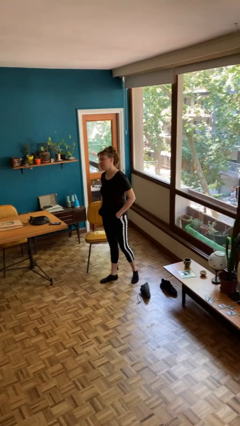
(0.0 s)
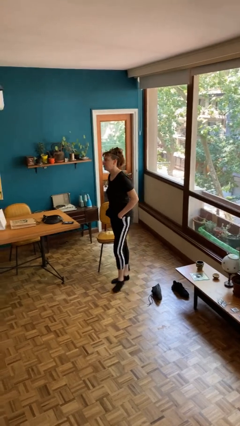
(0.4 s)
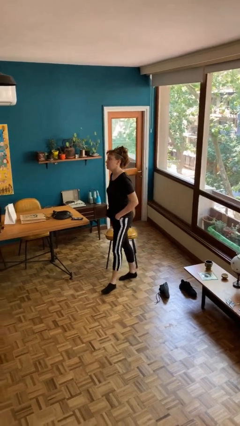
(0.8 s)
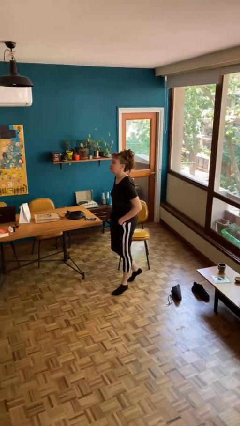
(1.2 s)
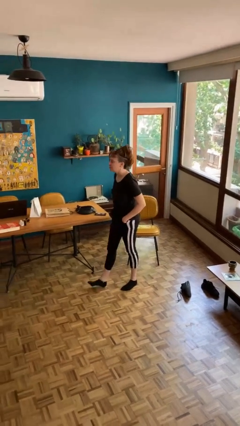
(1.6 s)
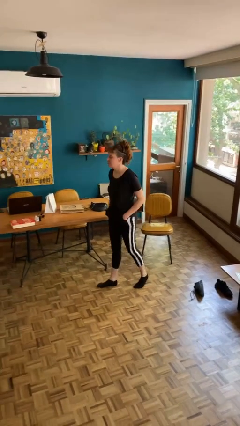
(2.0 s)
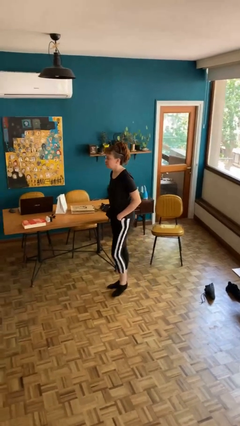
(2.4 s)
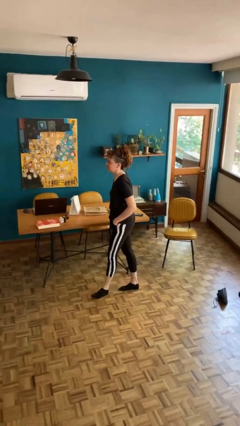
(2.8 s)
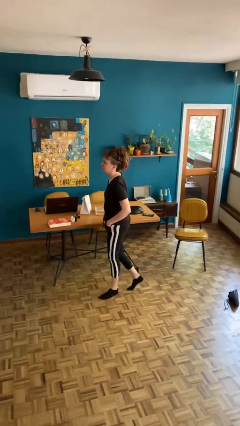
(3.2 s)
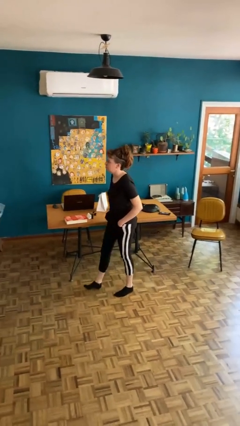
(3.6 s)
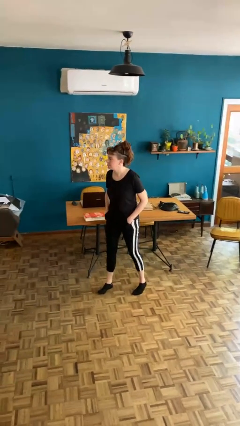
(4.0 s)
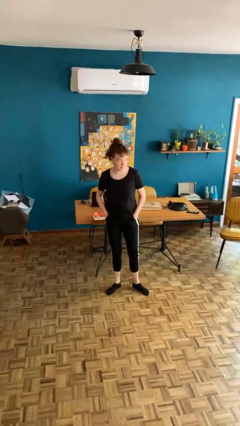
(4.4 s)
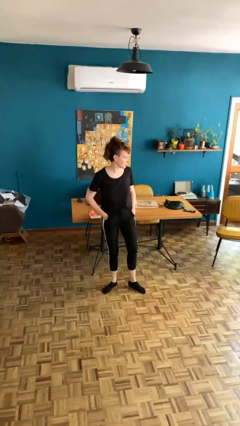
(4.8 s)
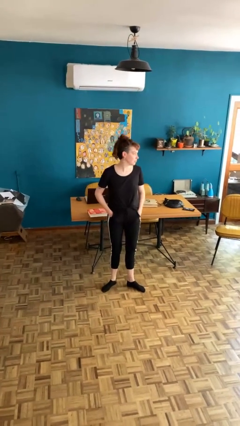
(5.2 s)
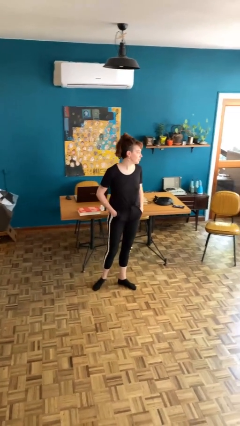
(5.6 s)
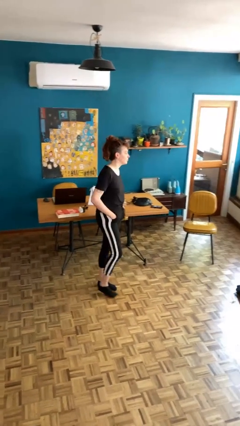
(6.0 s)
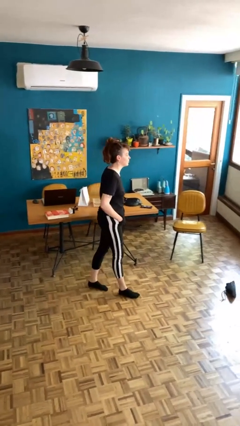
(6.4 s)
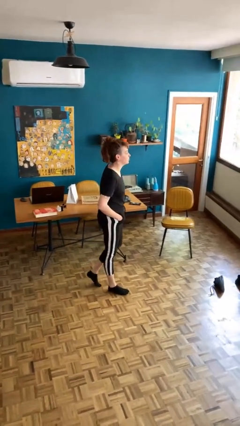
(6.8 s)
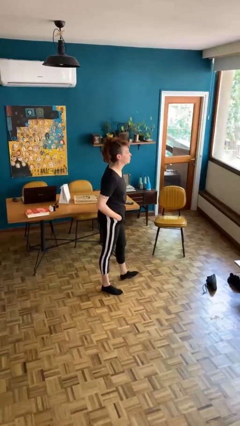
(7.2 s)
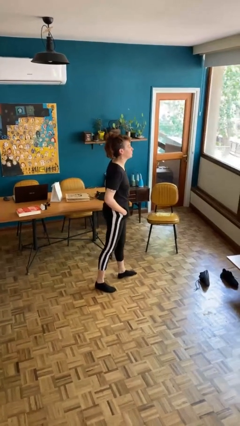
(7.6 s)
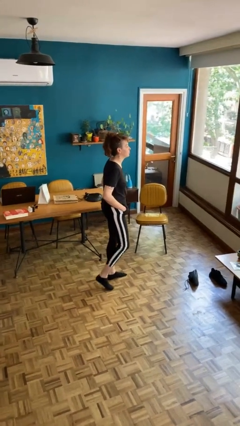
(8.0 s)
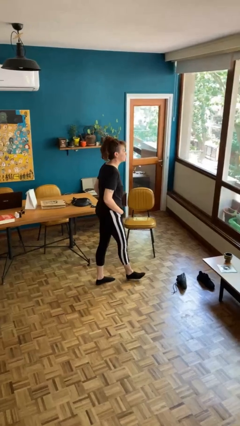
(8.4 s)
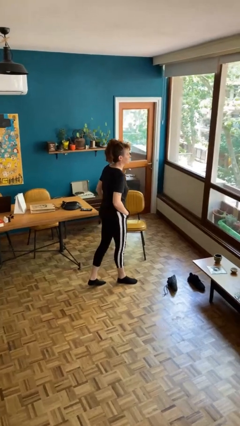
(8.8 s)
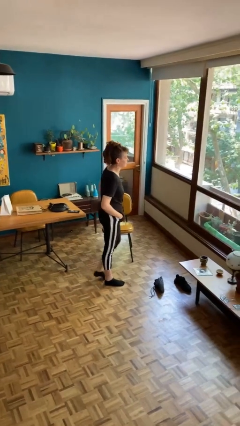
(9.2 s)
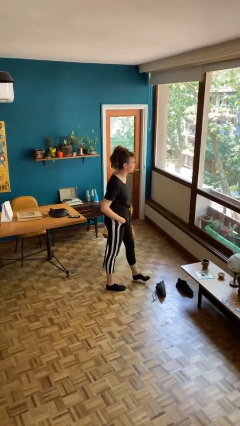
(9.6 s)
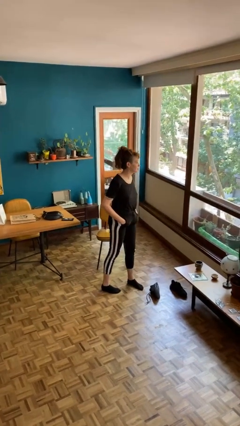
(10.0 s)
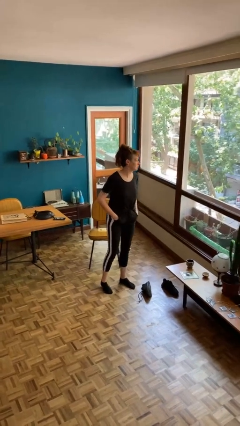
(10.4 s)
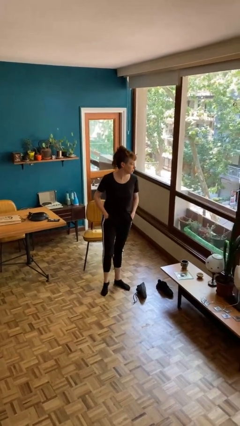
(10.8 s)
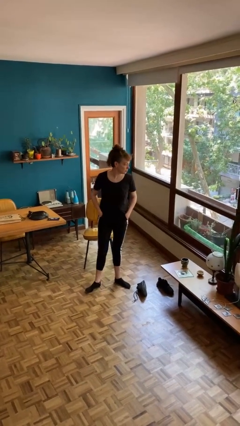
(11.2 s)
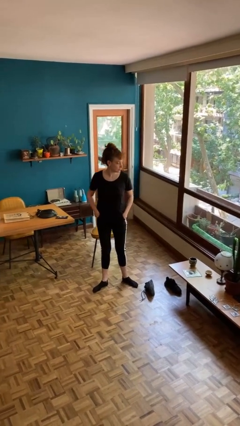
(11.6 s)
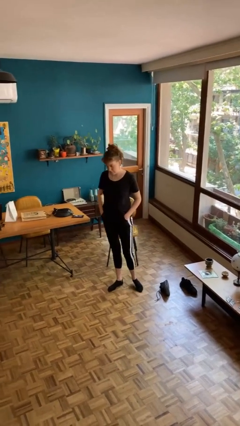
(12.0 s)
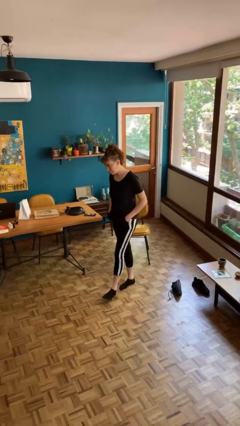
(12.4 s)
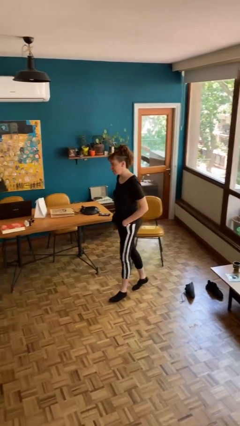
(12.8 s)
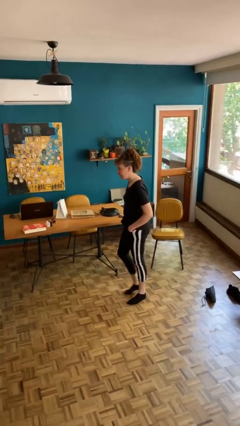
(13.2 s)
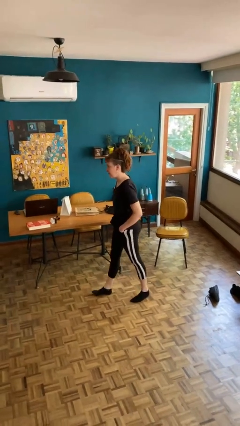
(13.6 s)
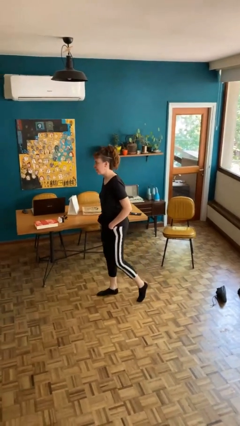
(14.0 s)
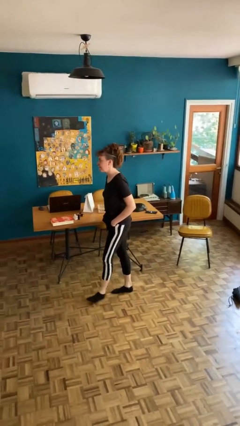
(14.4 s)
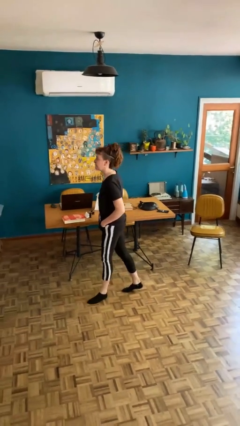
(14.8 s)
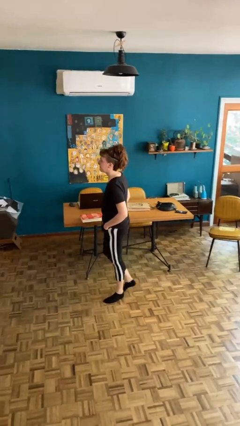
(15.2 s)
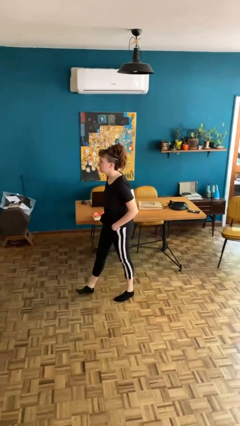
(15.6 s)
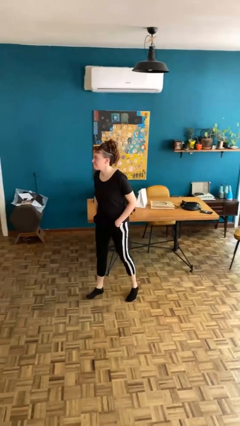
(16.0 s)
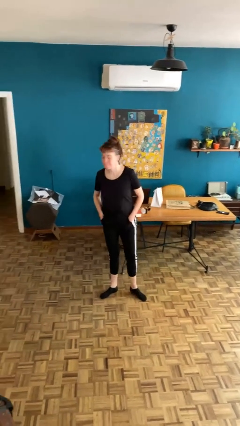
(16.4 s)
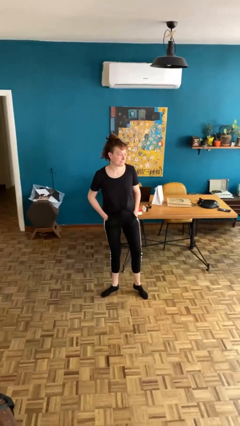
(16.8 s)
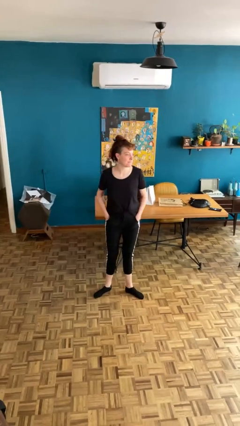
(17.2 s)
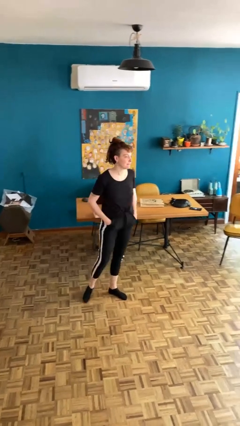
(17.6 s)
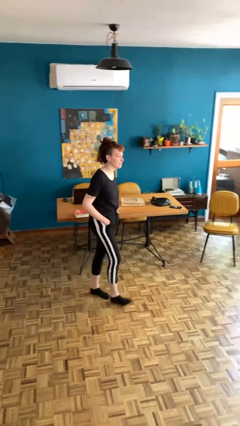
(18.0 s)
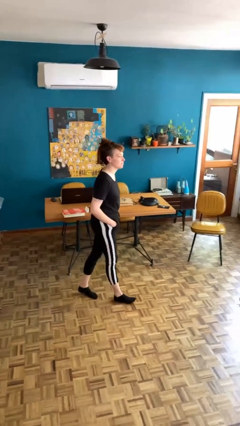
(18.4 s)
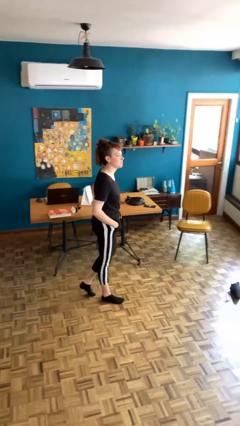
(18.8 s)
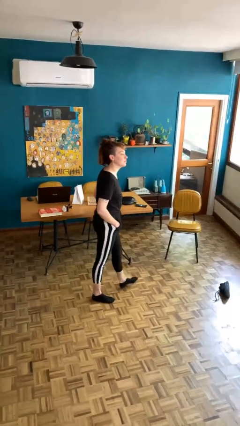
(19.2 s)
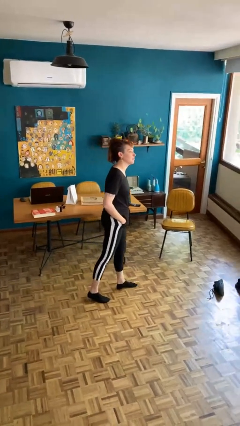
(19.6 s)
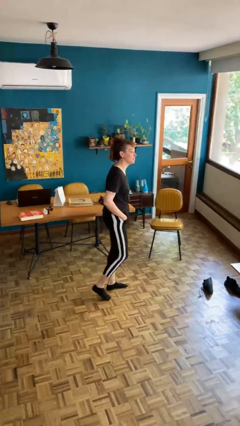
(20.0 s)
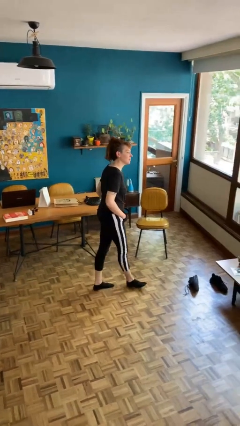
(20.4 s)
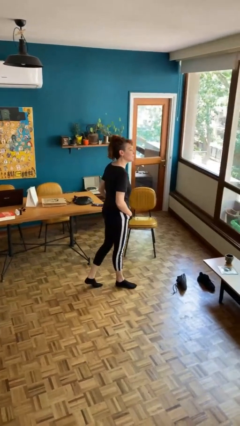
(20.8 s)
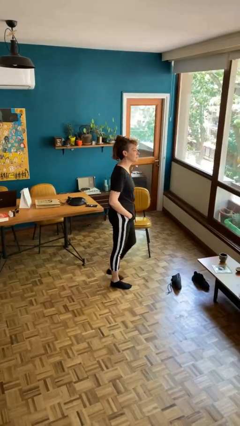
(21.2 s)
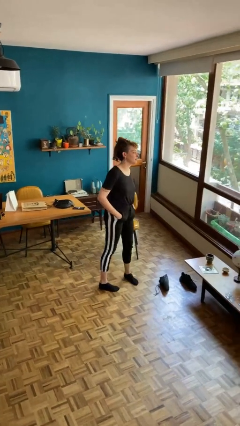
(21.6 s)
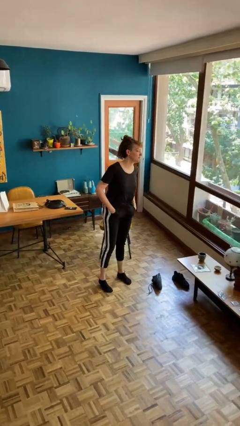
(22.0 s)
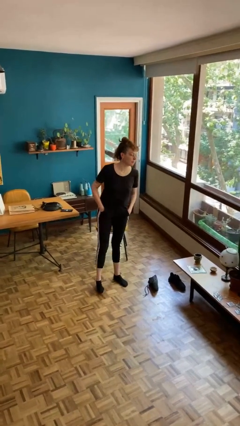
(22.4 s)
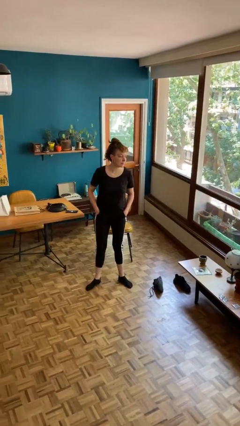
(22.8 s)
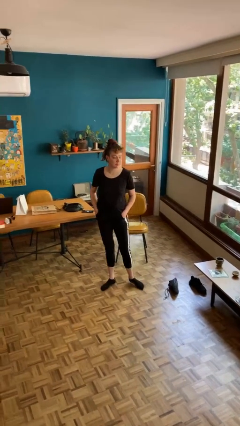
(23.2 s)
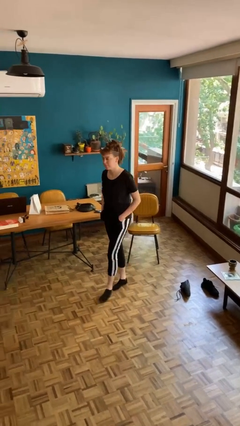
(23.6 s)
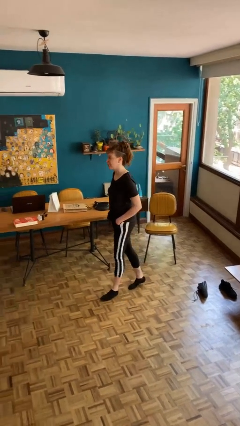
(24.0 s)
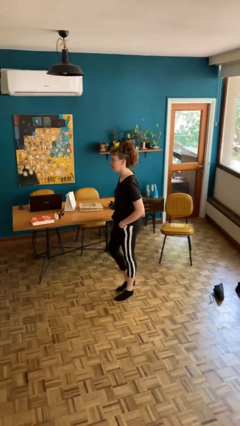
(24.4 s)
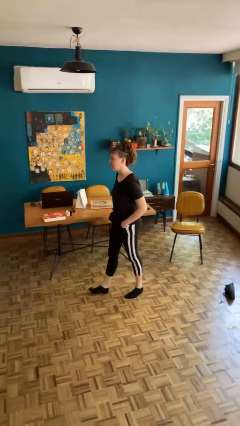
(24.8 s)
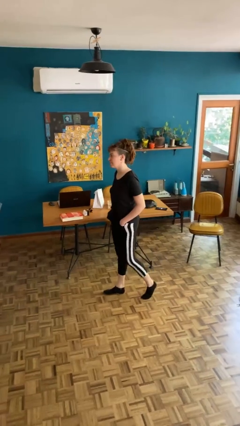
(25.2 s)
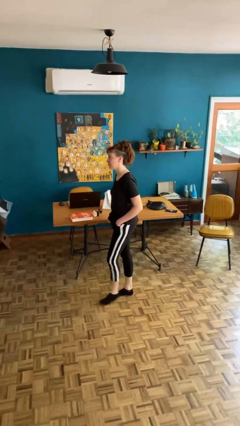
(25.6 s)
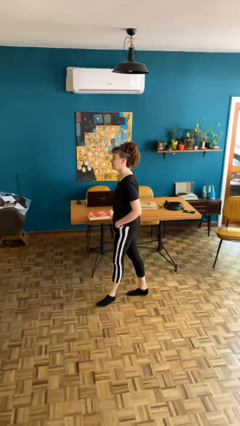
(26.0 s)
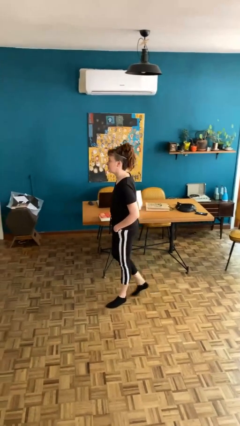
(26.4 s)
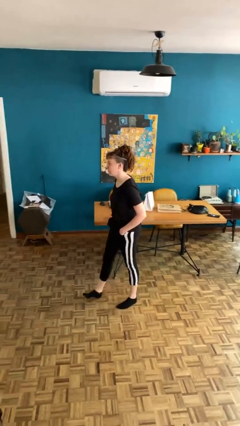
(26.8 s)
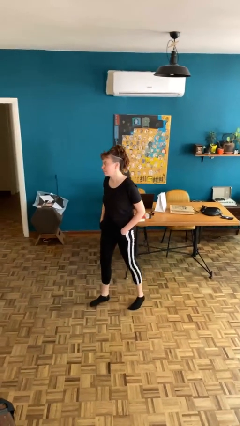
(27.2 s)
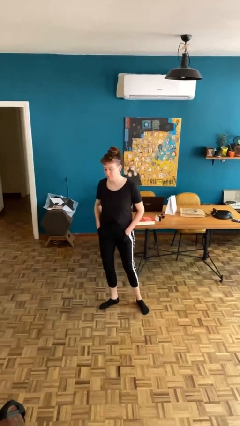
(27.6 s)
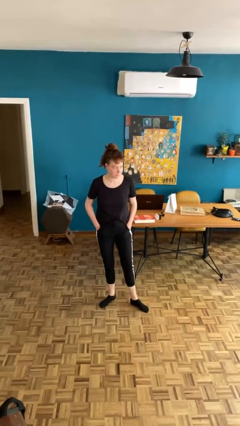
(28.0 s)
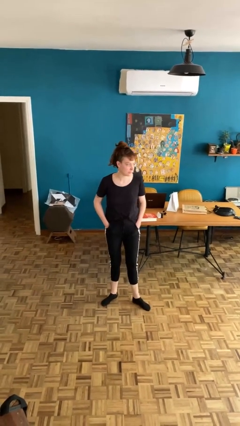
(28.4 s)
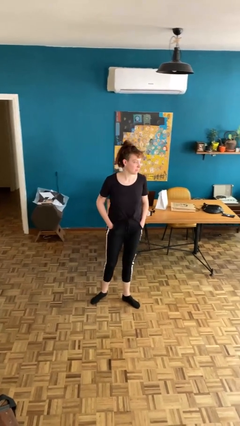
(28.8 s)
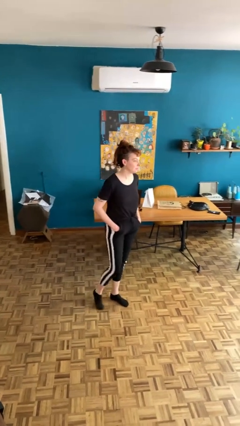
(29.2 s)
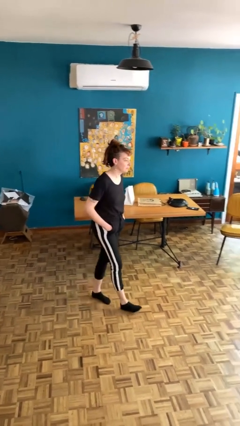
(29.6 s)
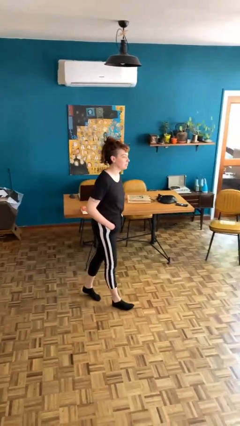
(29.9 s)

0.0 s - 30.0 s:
person walks

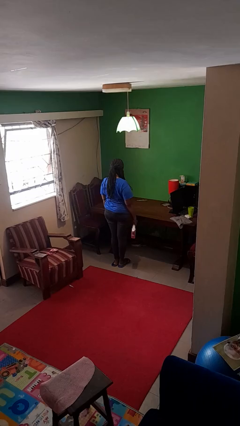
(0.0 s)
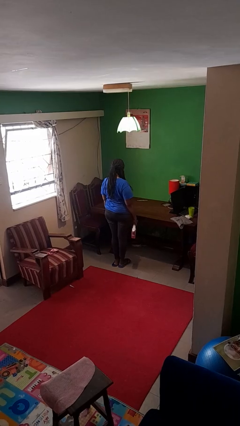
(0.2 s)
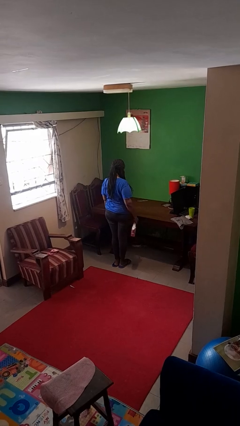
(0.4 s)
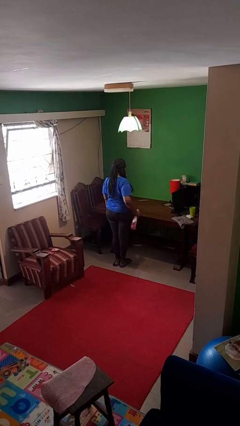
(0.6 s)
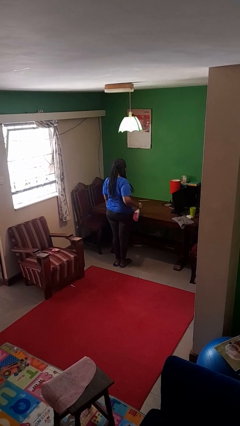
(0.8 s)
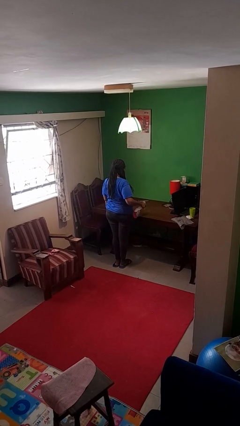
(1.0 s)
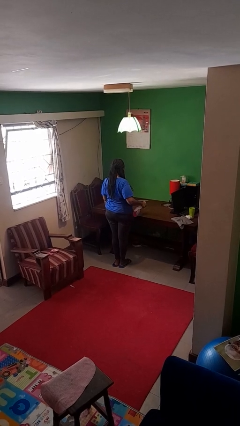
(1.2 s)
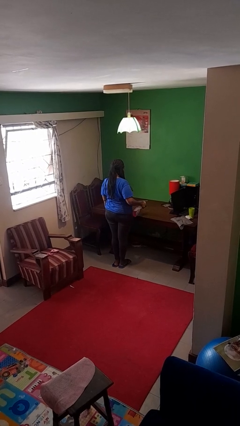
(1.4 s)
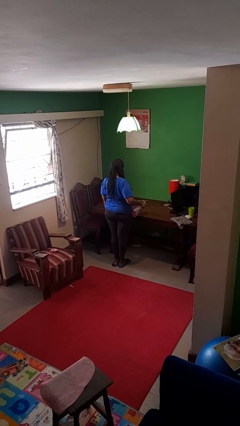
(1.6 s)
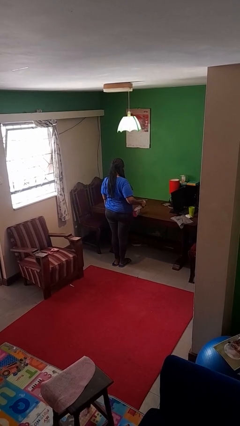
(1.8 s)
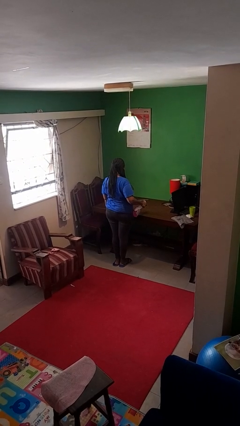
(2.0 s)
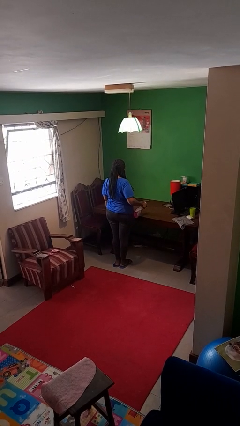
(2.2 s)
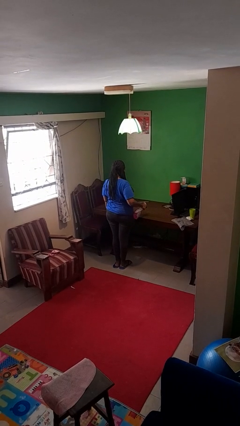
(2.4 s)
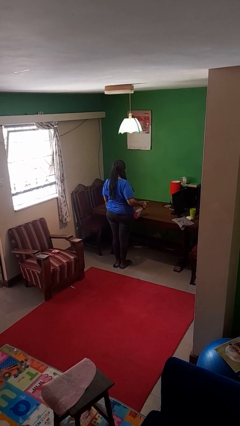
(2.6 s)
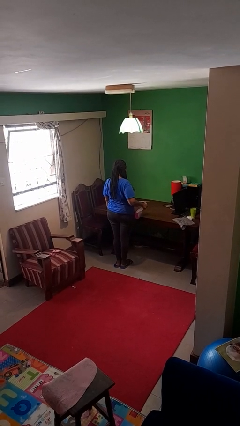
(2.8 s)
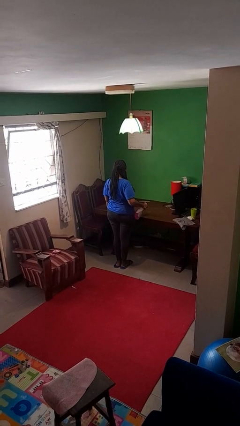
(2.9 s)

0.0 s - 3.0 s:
person sprays from bottle

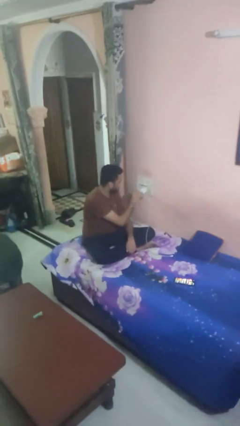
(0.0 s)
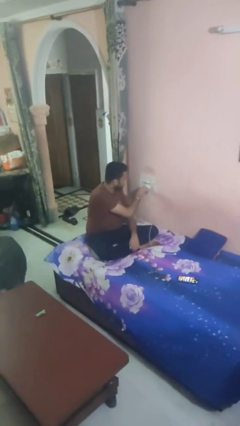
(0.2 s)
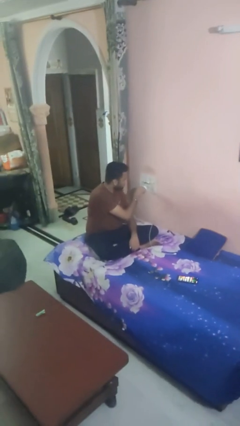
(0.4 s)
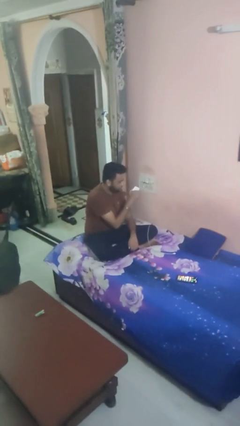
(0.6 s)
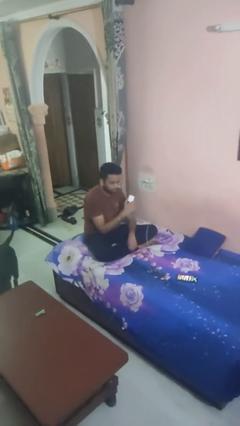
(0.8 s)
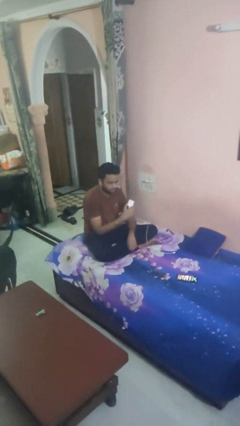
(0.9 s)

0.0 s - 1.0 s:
person unplugs from electrical socket
